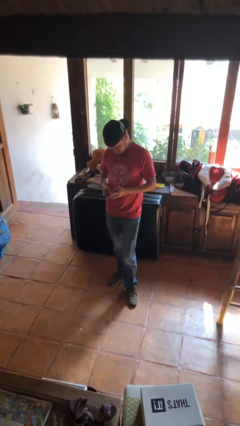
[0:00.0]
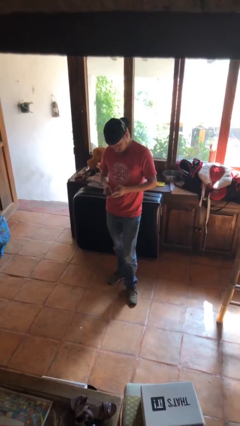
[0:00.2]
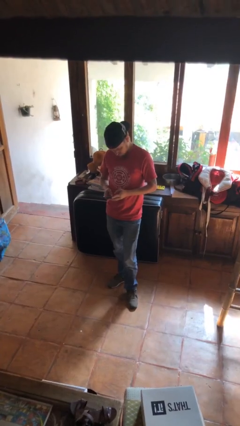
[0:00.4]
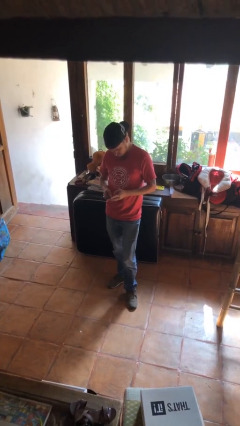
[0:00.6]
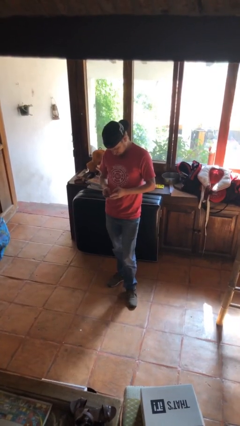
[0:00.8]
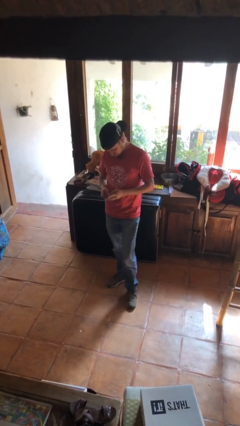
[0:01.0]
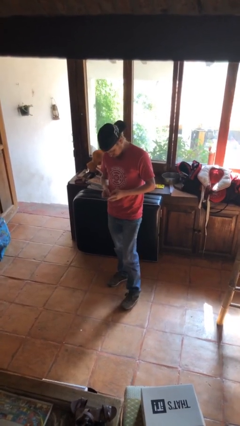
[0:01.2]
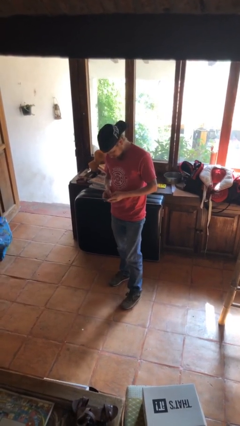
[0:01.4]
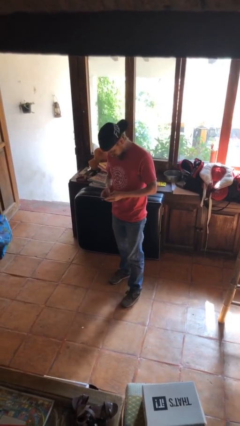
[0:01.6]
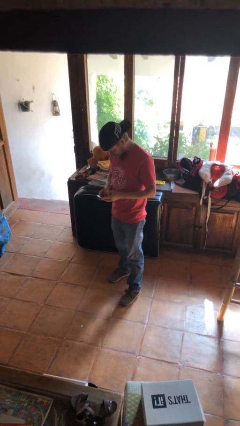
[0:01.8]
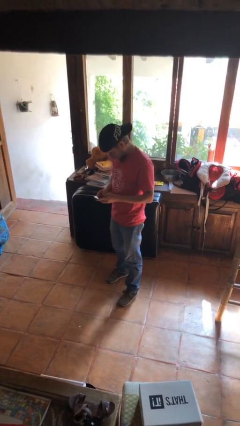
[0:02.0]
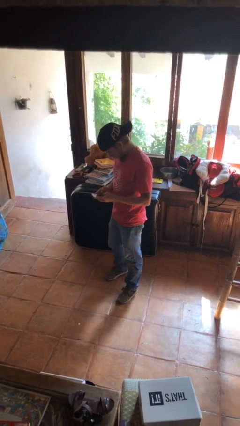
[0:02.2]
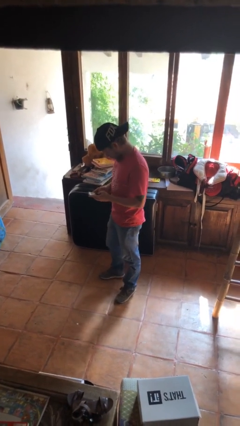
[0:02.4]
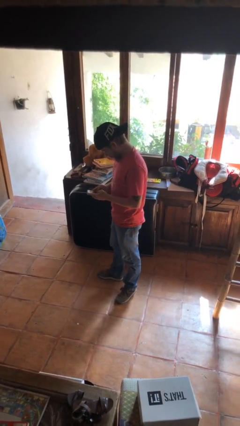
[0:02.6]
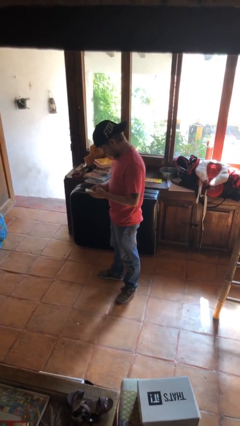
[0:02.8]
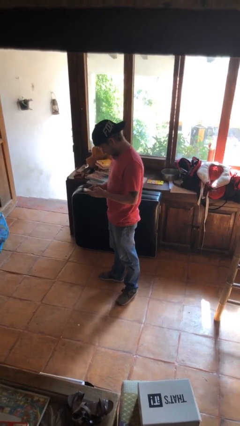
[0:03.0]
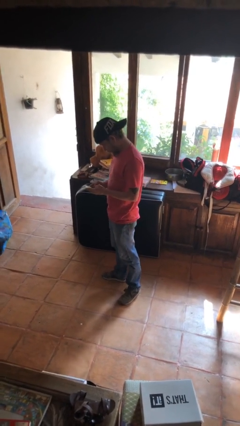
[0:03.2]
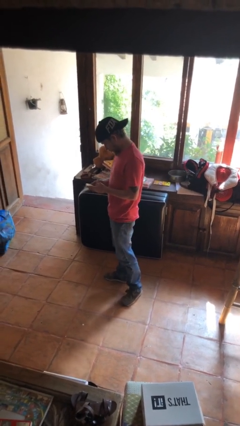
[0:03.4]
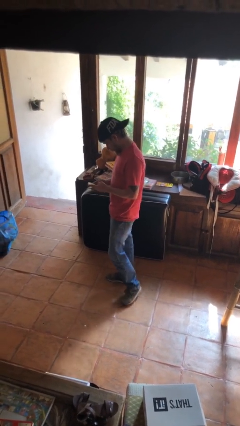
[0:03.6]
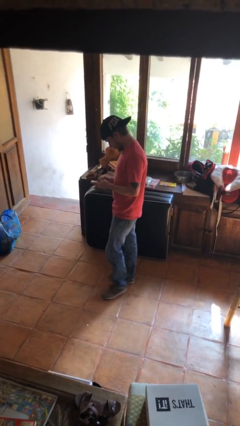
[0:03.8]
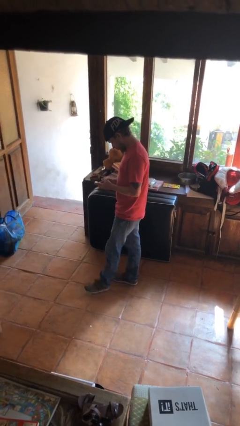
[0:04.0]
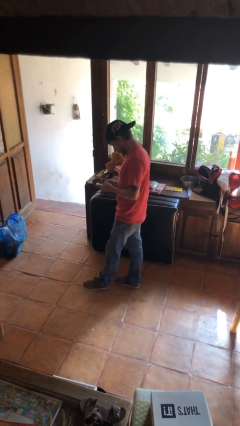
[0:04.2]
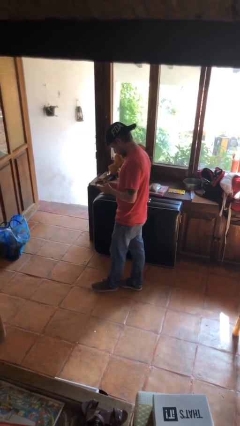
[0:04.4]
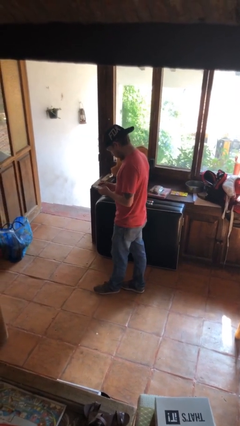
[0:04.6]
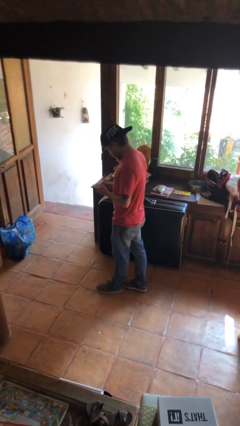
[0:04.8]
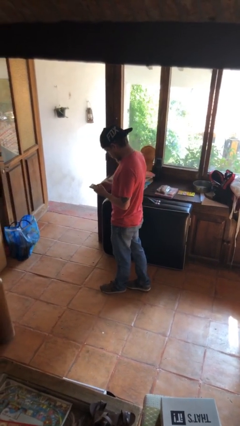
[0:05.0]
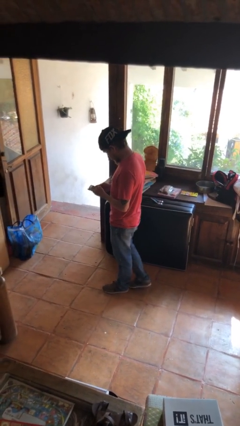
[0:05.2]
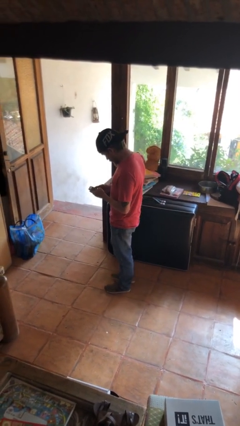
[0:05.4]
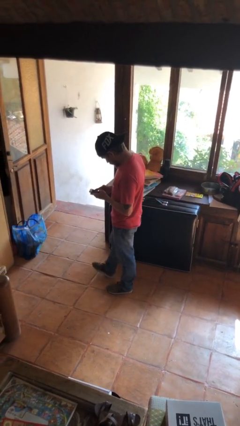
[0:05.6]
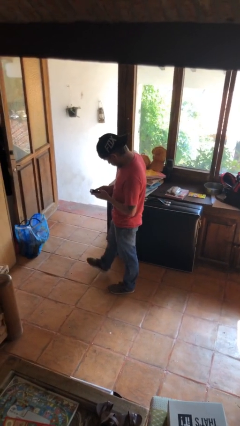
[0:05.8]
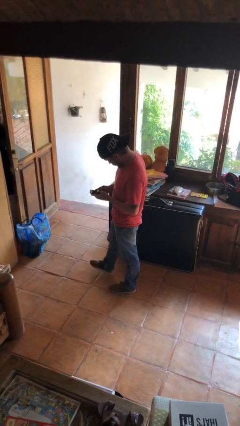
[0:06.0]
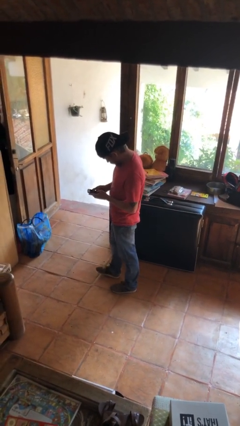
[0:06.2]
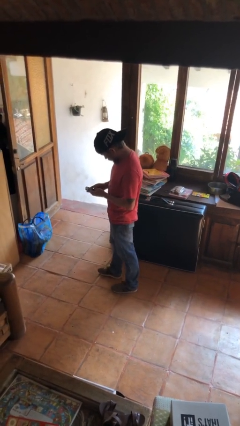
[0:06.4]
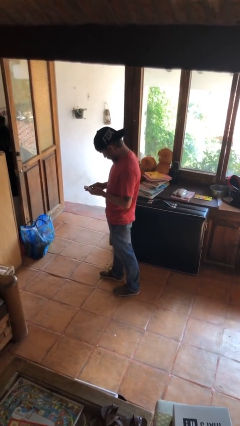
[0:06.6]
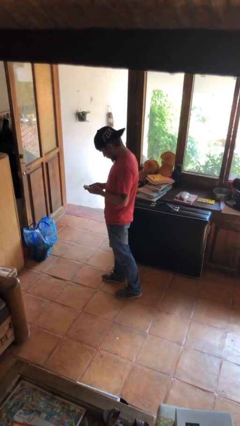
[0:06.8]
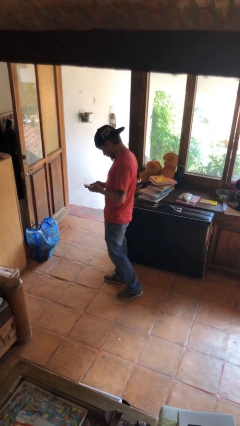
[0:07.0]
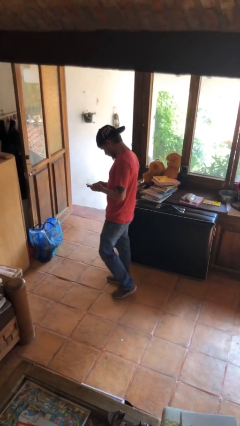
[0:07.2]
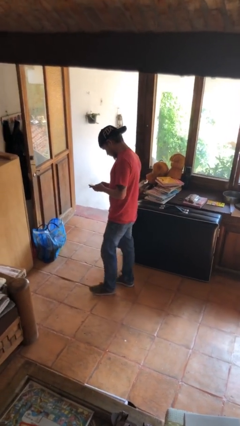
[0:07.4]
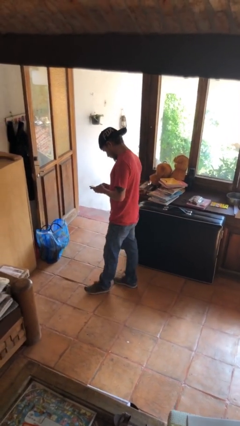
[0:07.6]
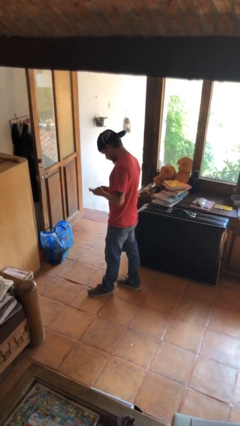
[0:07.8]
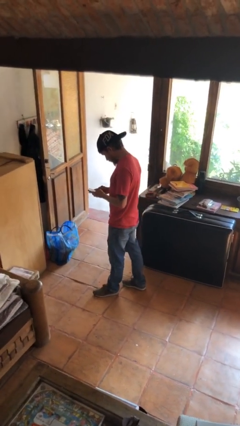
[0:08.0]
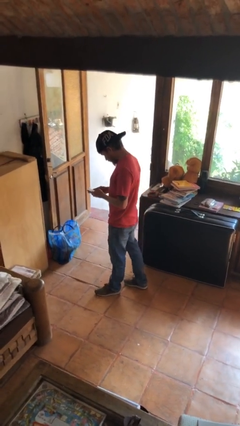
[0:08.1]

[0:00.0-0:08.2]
person texts on phone

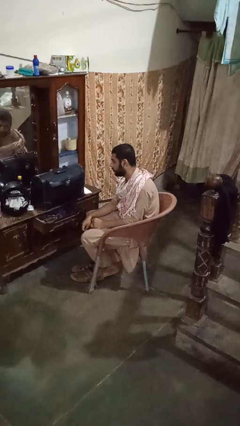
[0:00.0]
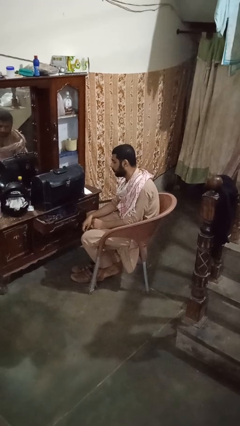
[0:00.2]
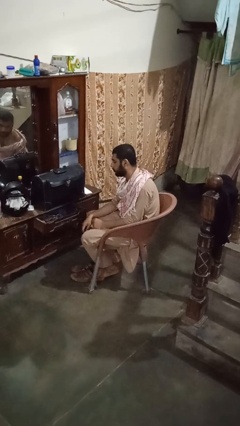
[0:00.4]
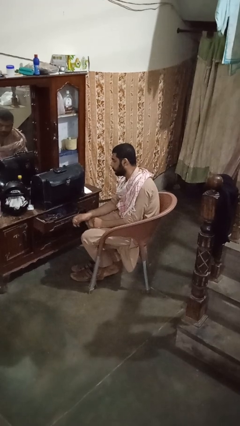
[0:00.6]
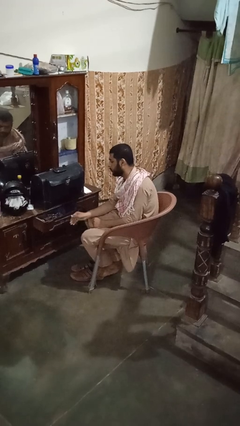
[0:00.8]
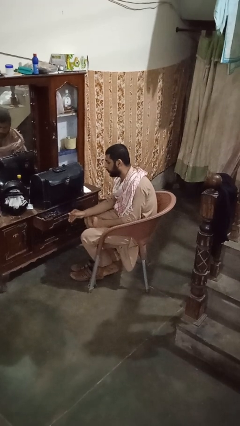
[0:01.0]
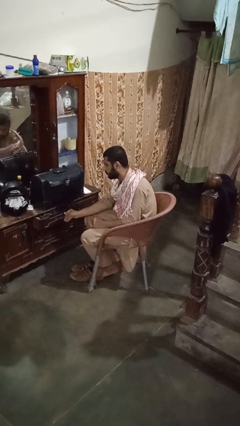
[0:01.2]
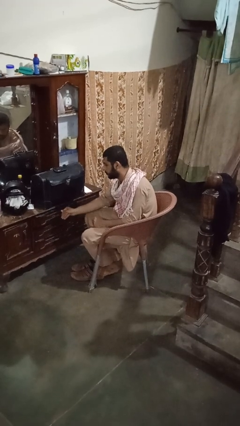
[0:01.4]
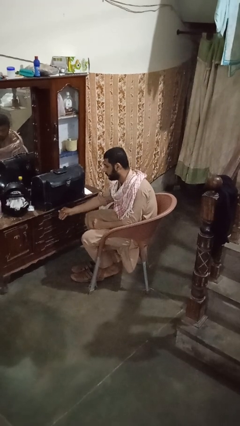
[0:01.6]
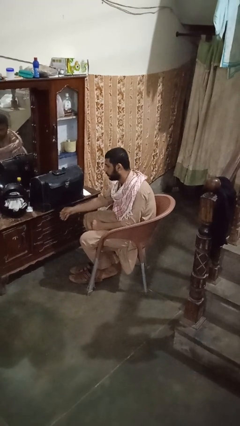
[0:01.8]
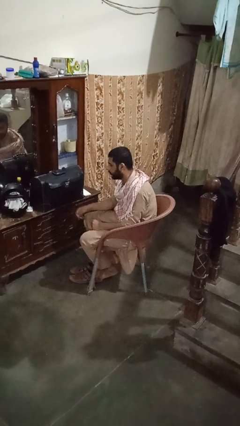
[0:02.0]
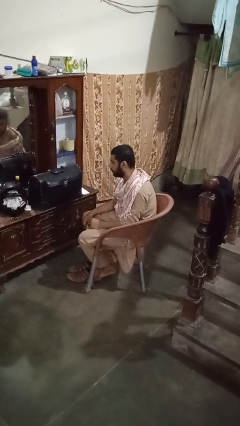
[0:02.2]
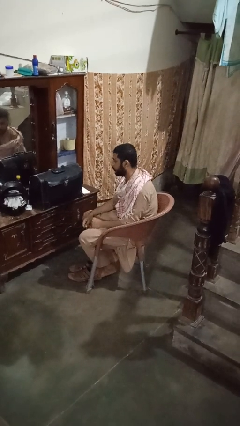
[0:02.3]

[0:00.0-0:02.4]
person closes dresser drawer

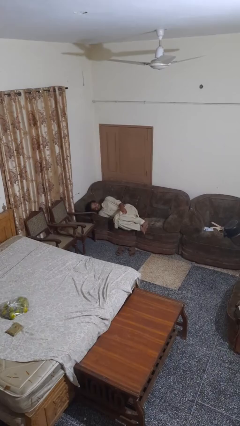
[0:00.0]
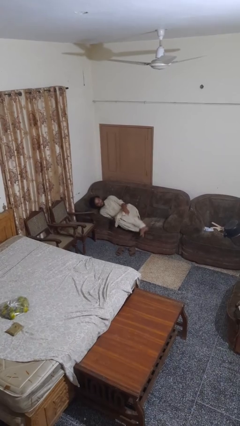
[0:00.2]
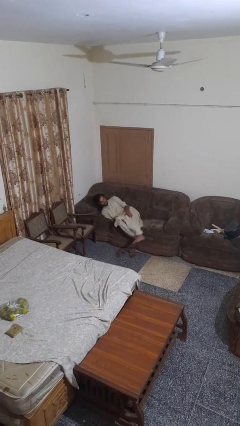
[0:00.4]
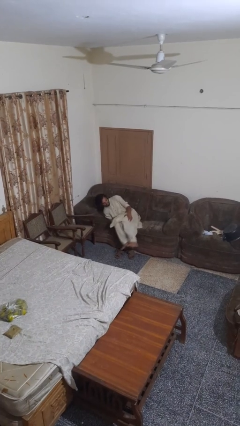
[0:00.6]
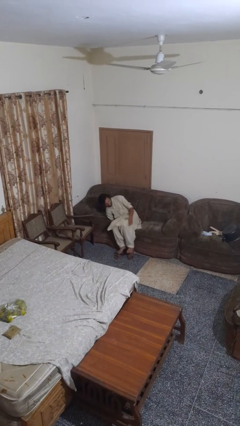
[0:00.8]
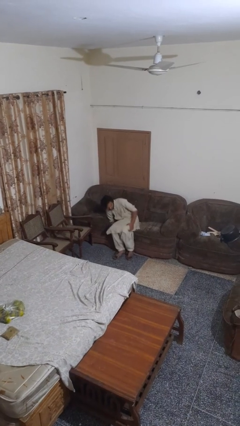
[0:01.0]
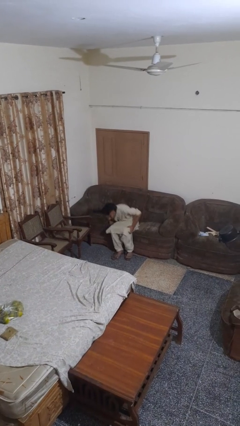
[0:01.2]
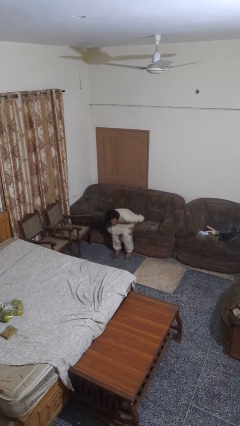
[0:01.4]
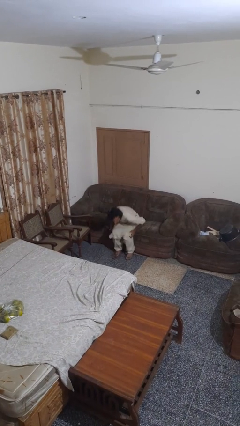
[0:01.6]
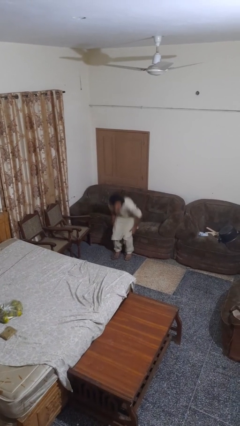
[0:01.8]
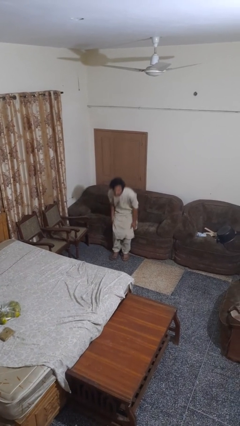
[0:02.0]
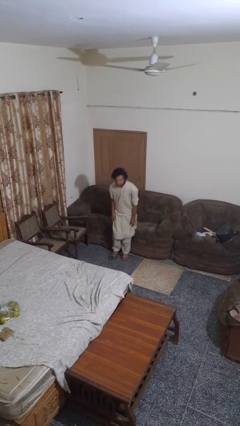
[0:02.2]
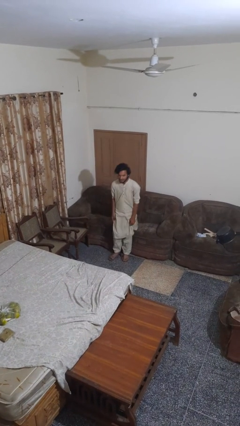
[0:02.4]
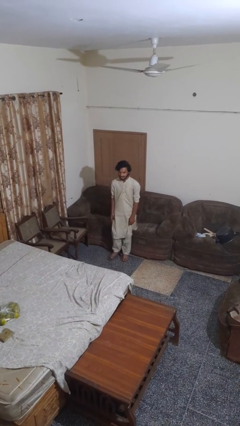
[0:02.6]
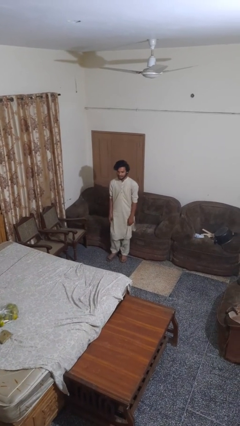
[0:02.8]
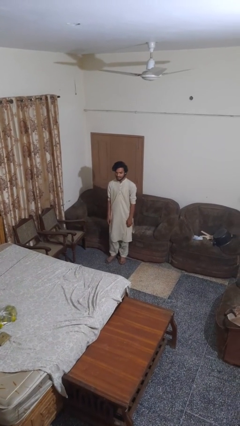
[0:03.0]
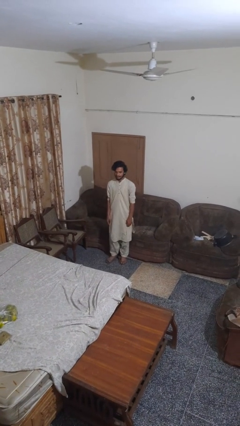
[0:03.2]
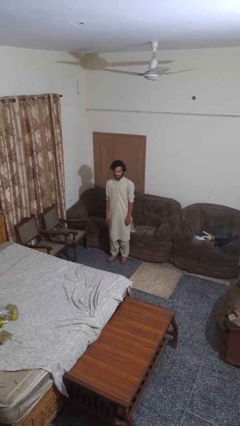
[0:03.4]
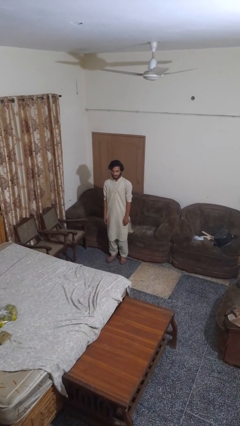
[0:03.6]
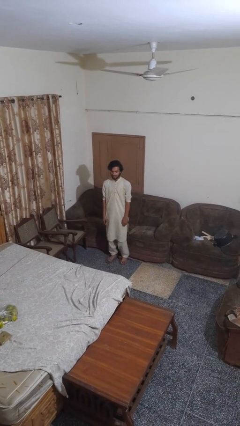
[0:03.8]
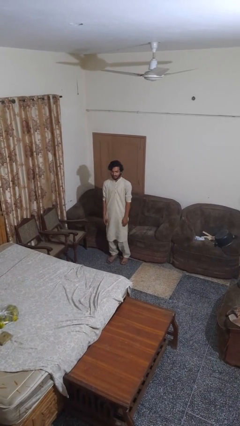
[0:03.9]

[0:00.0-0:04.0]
person stands up

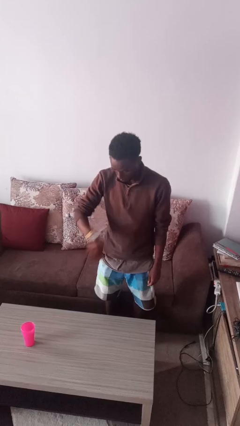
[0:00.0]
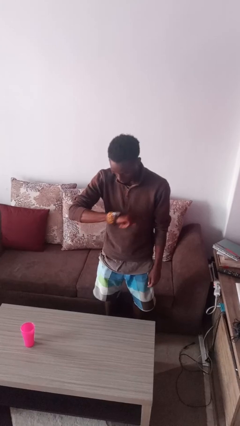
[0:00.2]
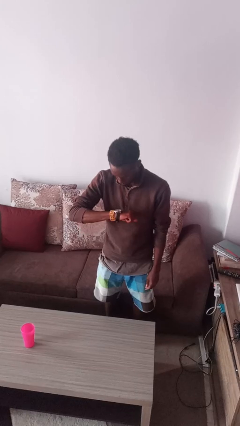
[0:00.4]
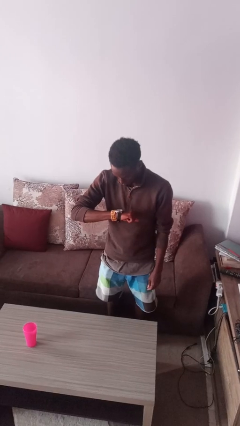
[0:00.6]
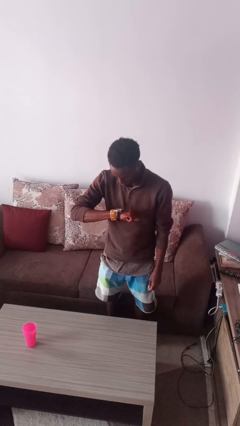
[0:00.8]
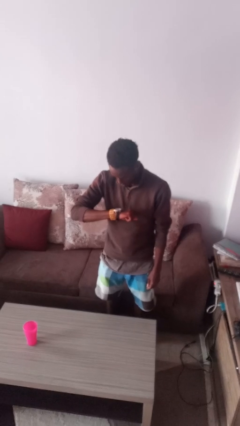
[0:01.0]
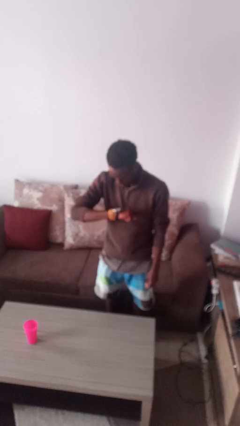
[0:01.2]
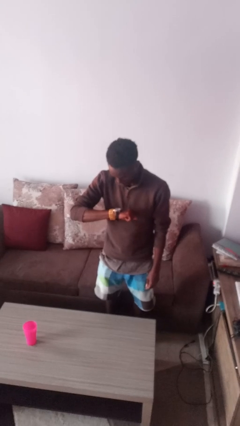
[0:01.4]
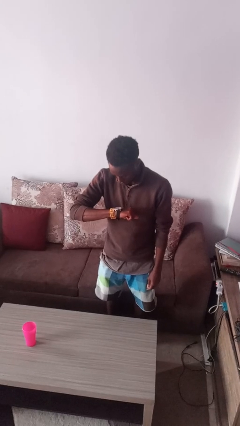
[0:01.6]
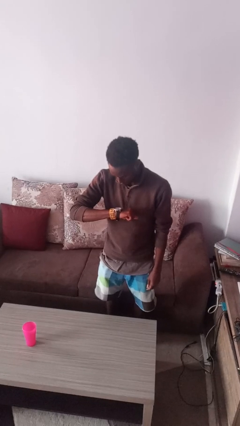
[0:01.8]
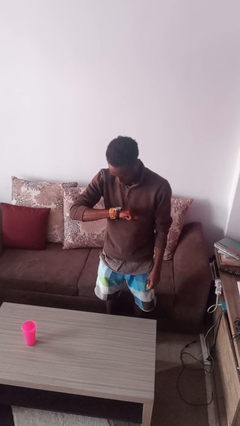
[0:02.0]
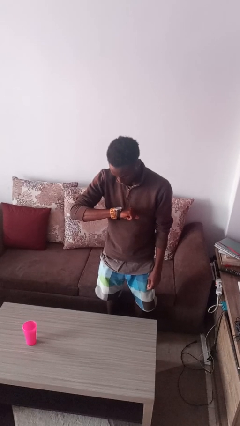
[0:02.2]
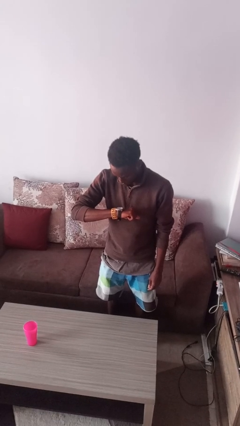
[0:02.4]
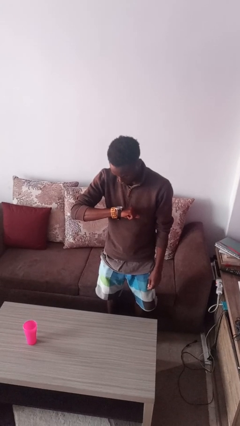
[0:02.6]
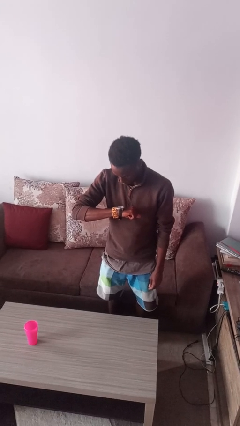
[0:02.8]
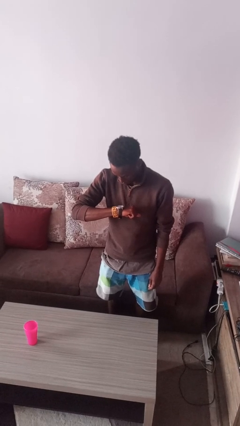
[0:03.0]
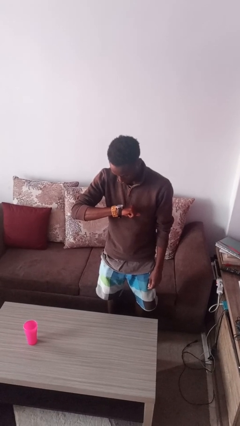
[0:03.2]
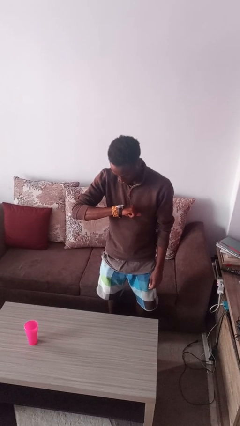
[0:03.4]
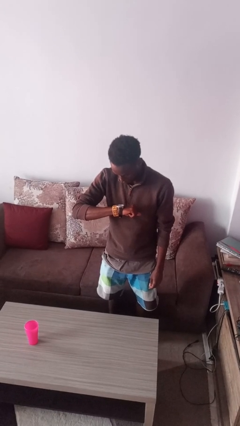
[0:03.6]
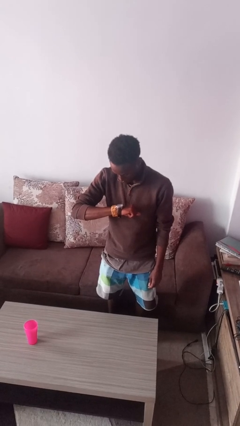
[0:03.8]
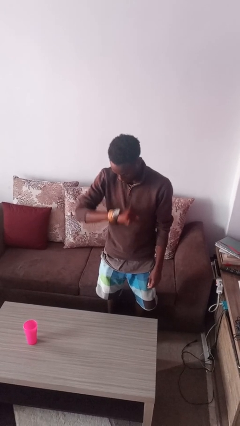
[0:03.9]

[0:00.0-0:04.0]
person looks at wristwatch
